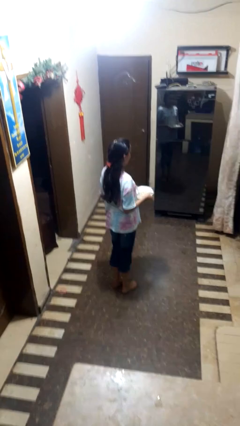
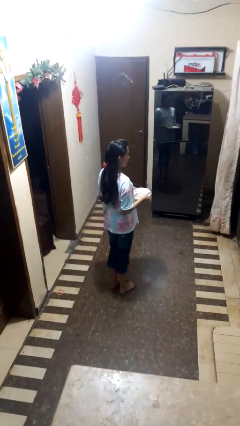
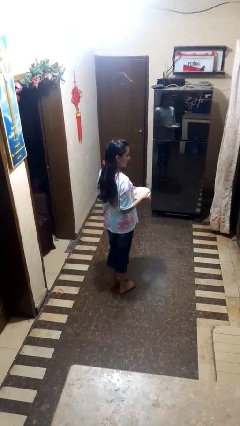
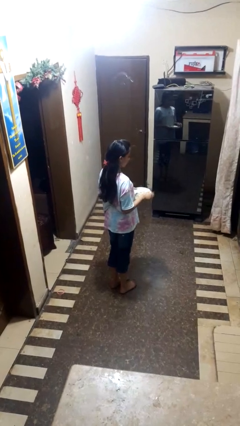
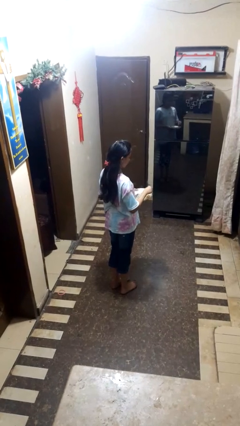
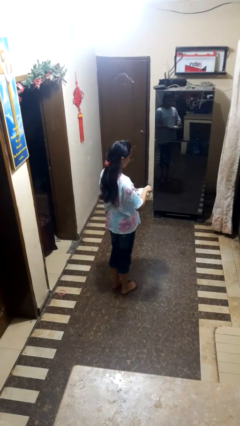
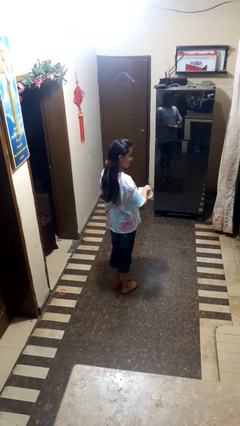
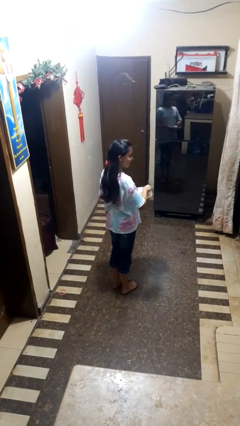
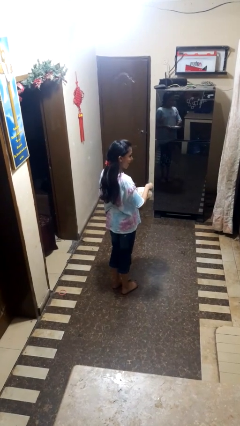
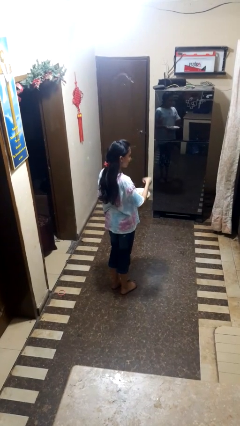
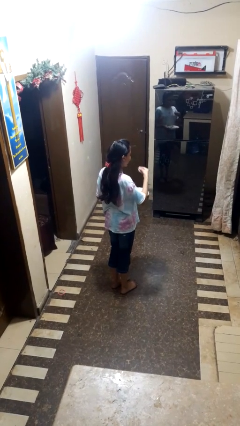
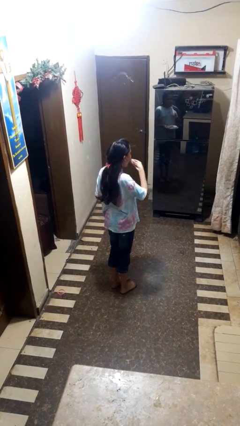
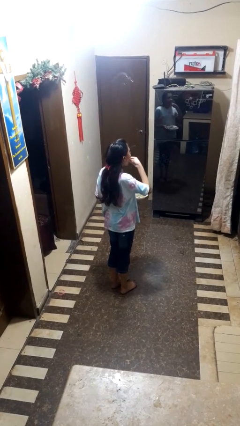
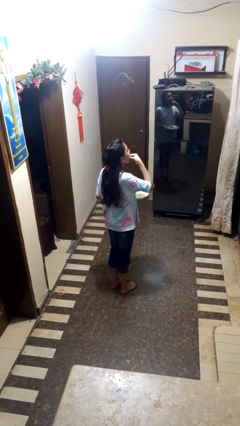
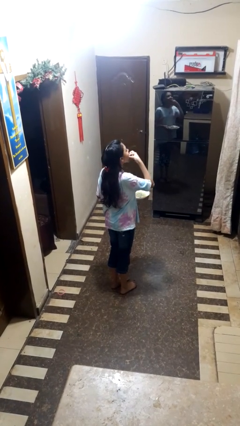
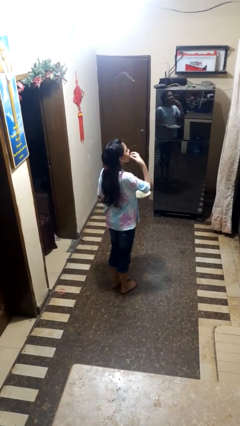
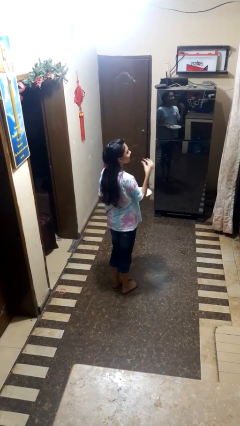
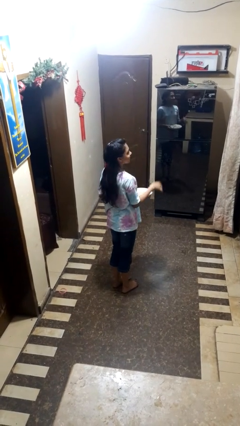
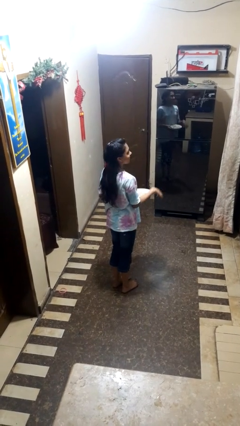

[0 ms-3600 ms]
person eats with hands

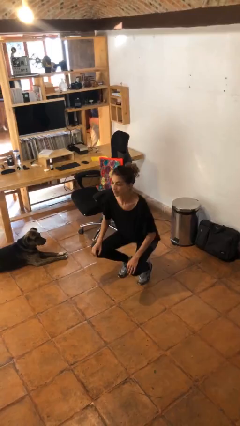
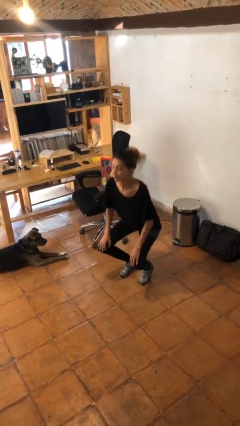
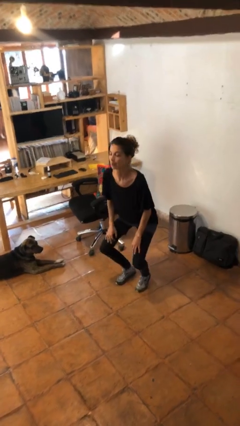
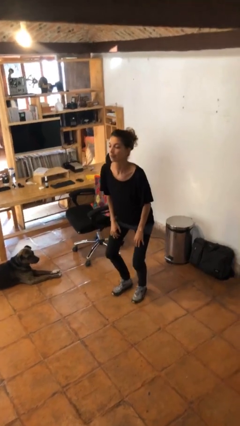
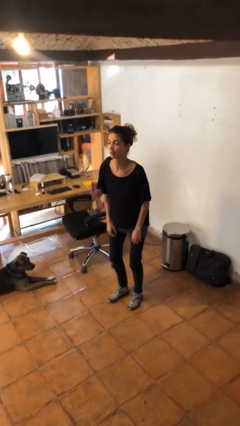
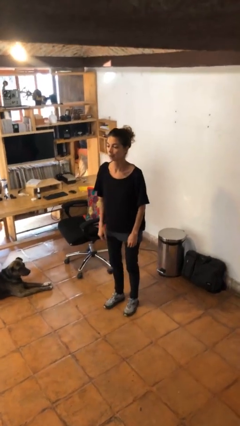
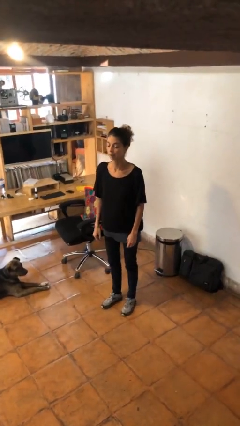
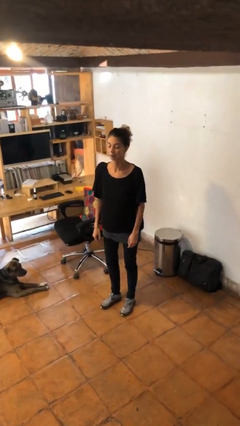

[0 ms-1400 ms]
person stands up

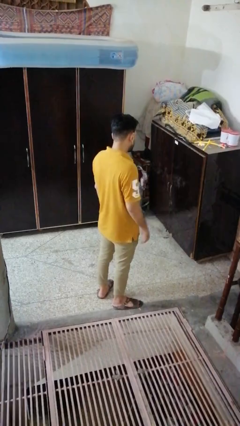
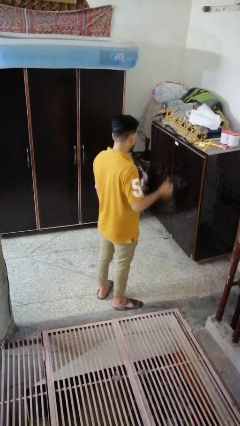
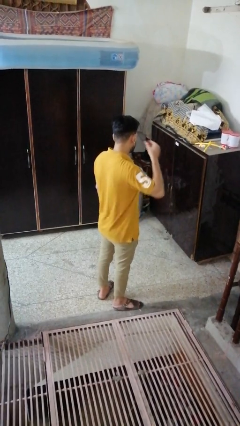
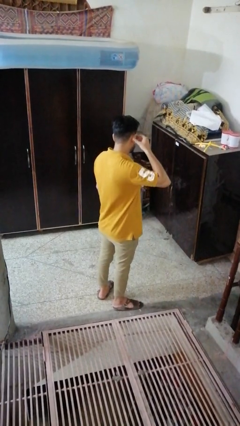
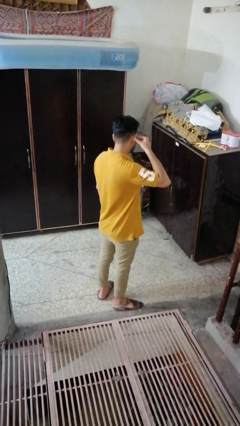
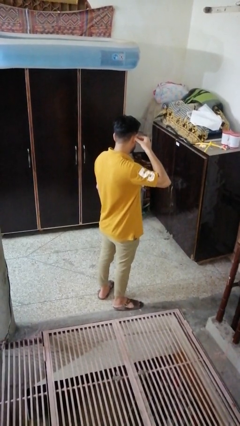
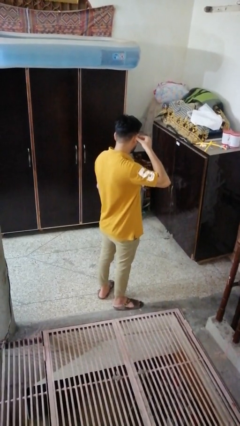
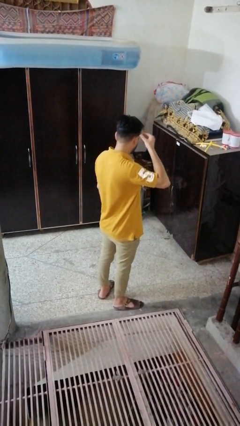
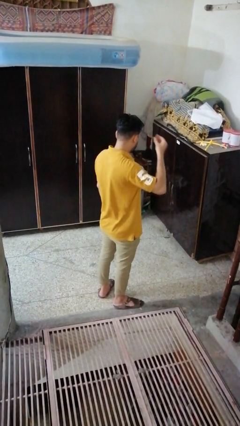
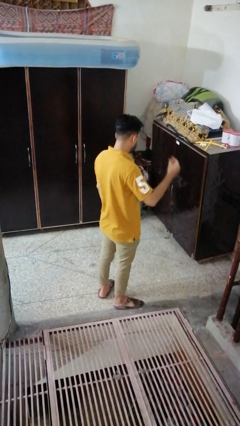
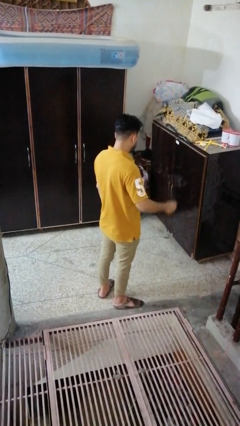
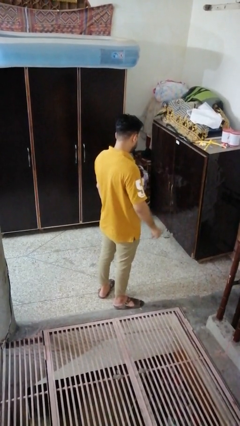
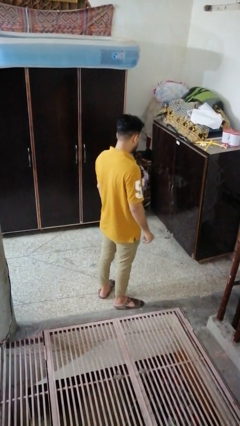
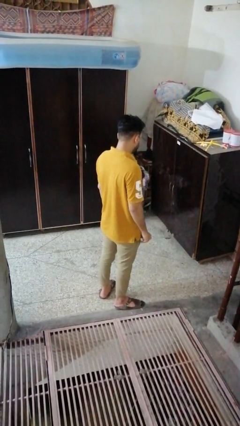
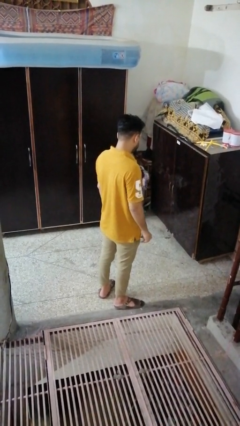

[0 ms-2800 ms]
person takes off earrings

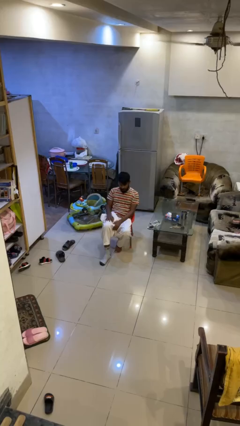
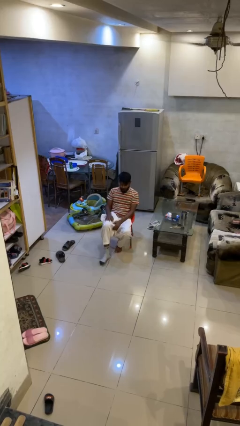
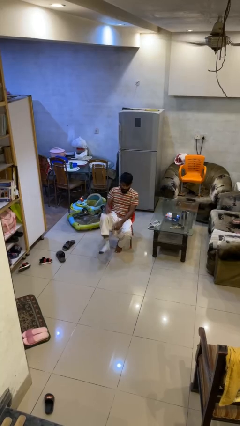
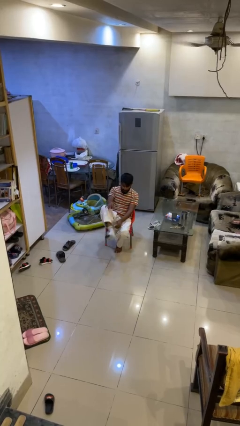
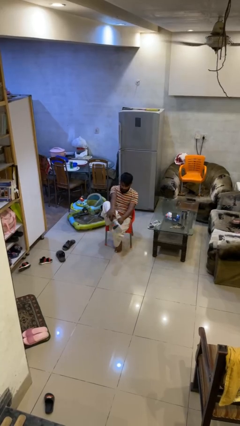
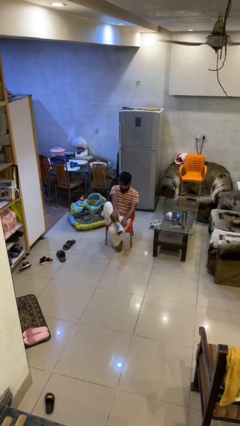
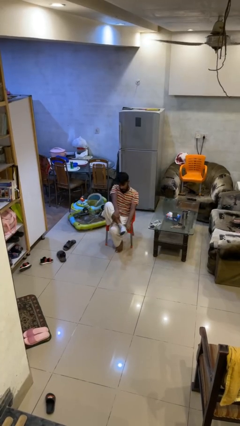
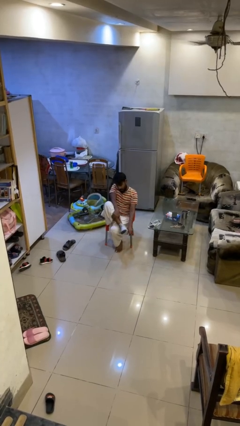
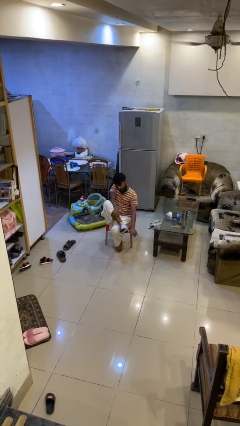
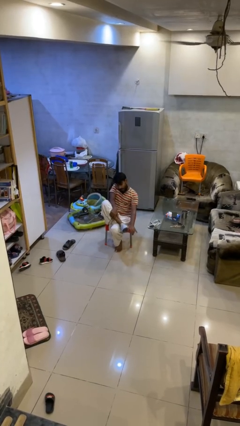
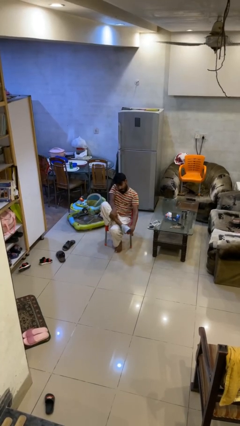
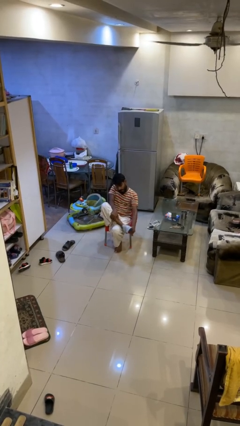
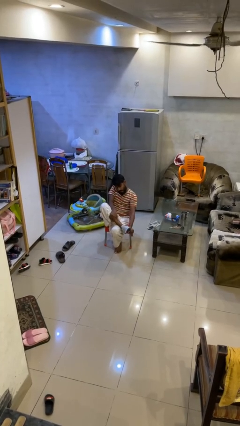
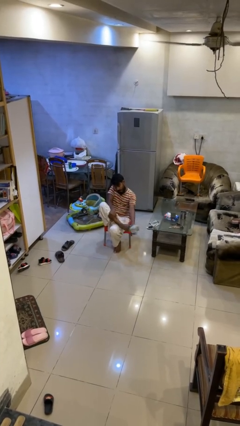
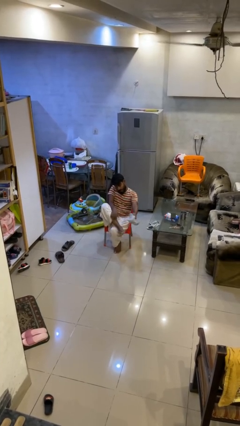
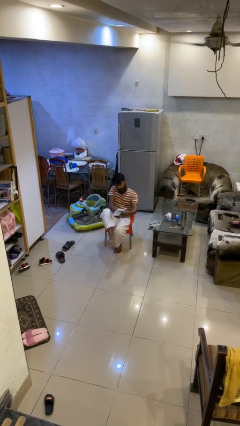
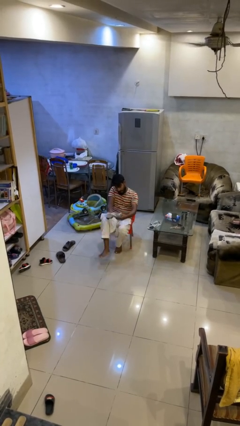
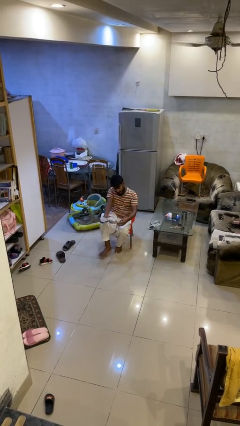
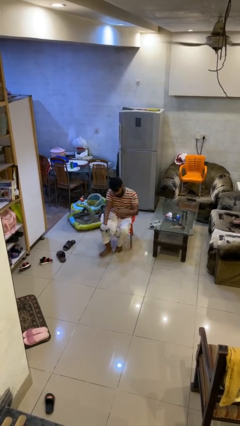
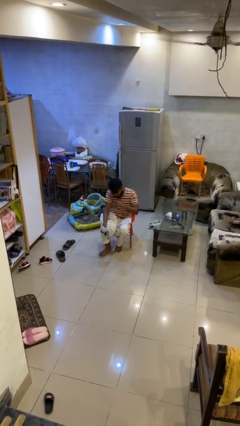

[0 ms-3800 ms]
person takes off socks

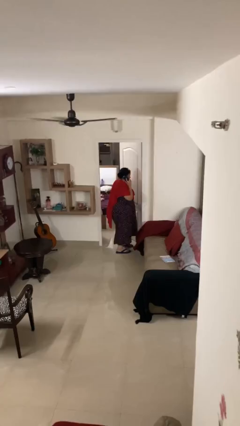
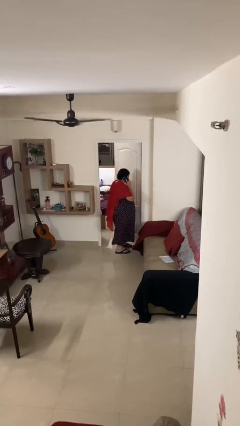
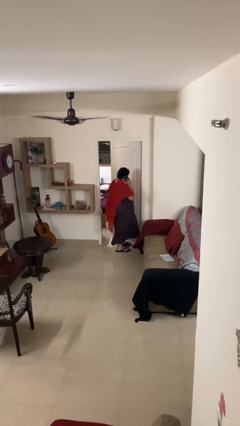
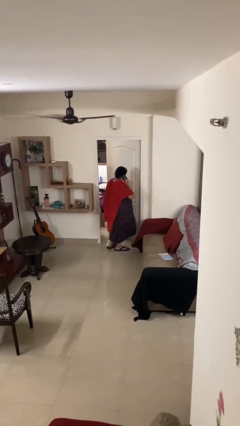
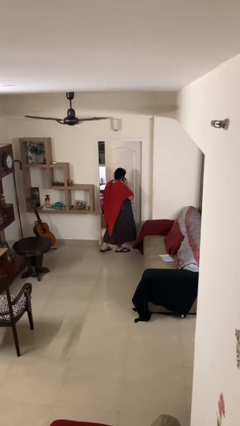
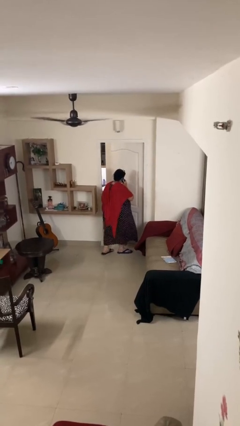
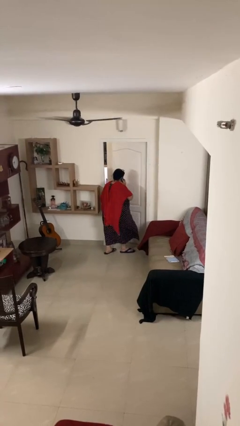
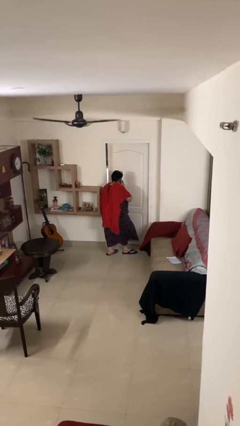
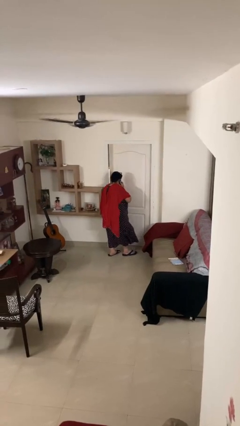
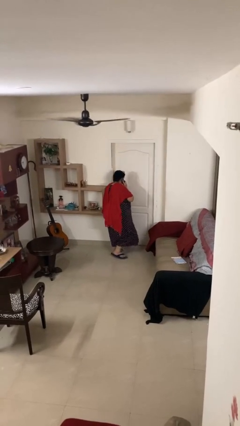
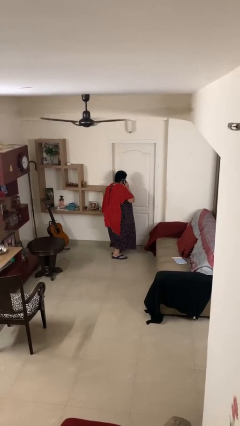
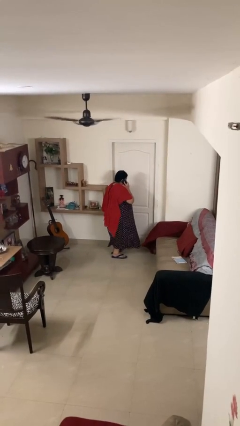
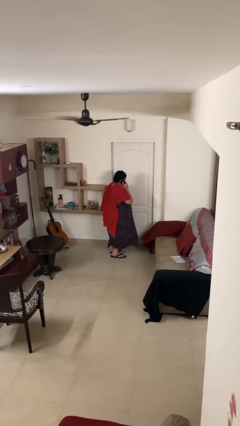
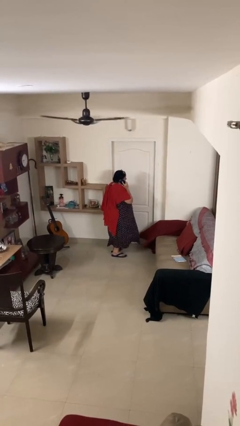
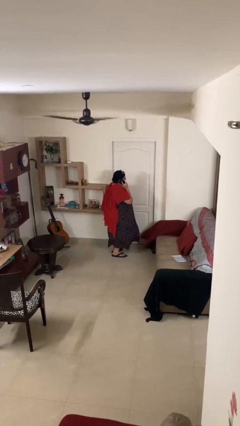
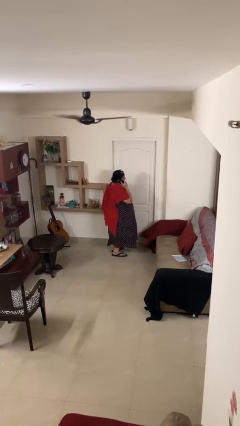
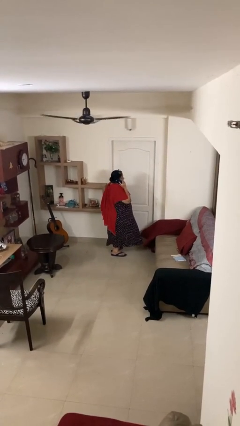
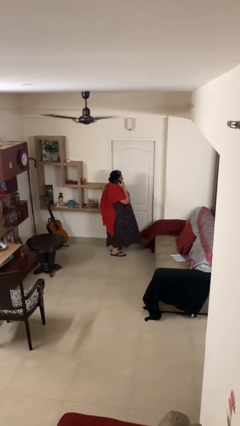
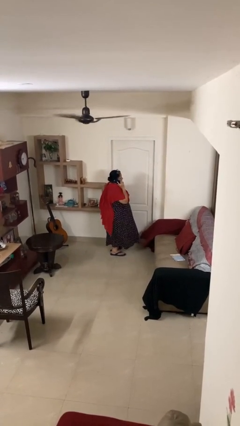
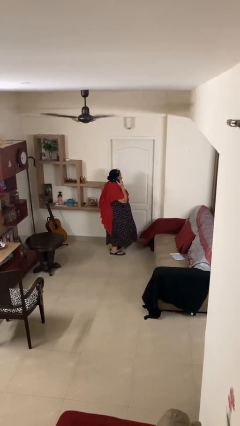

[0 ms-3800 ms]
person closes facility door

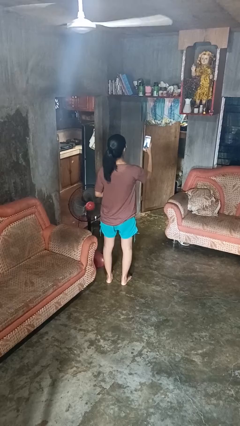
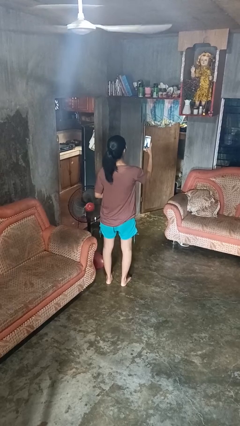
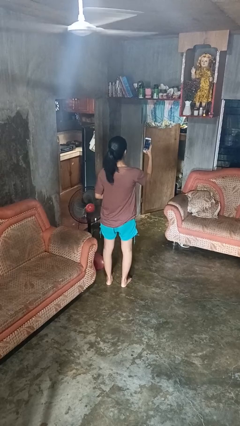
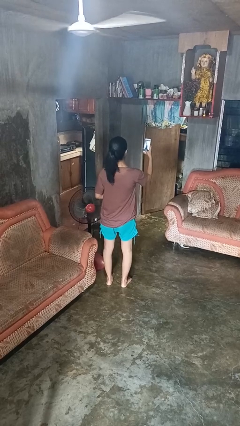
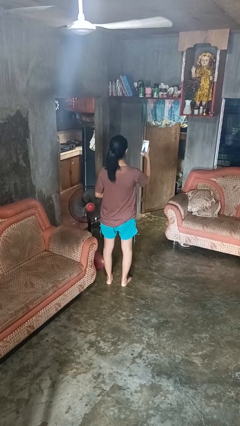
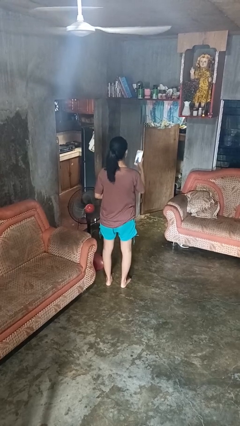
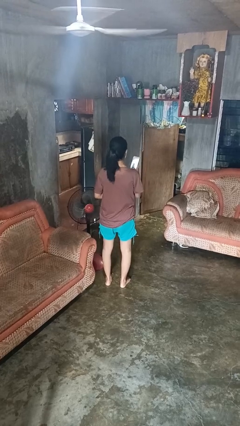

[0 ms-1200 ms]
person takes selfie

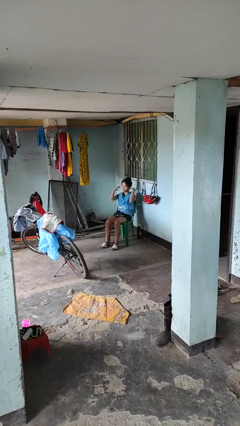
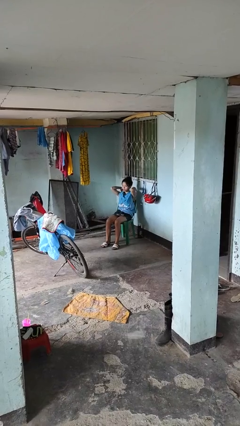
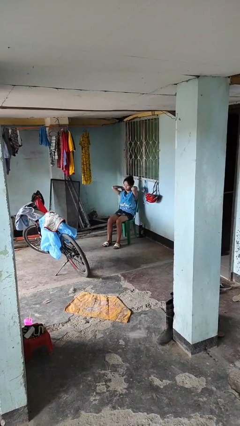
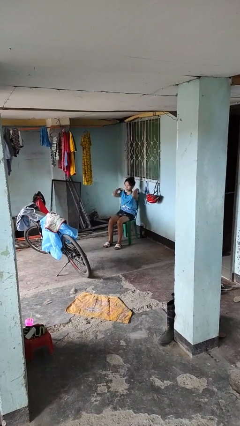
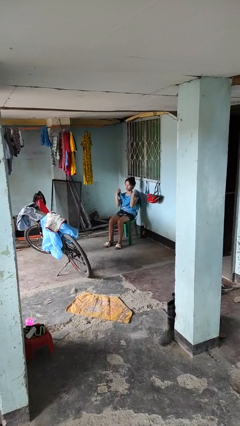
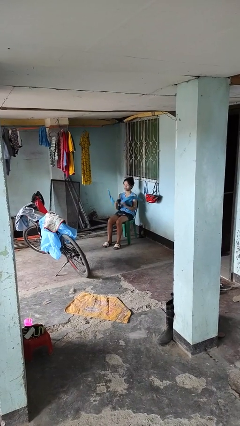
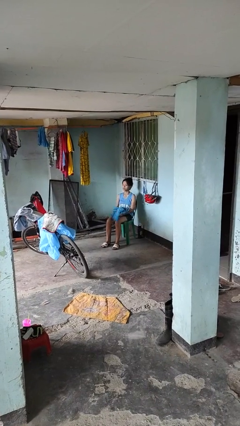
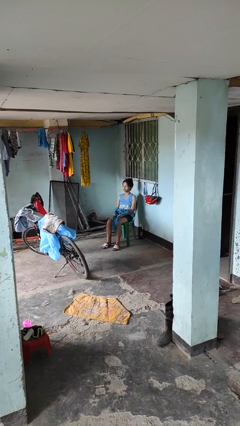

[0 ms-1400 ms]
person takes off scarf
